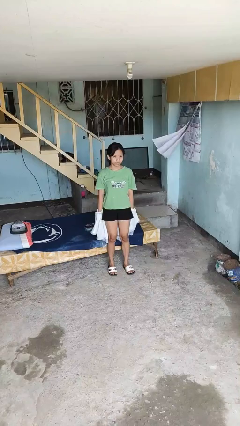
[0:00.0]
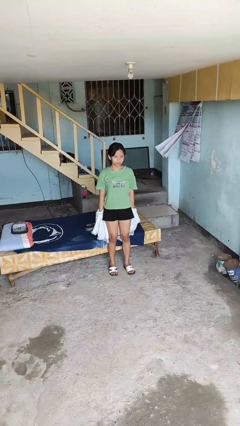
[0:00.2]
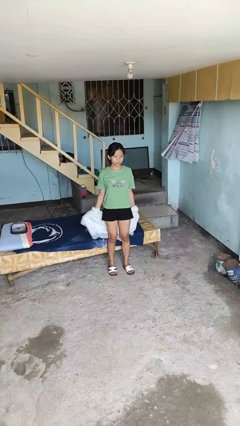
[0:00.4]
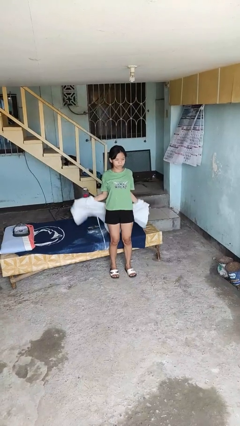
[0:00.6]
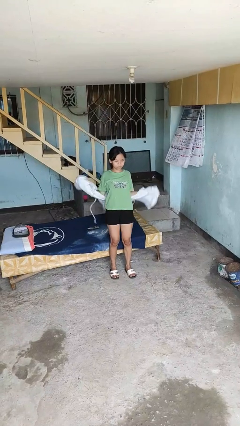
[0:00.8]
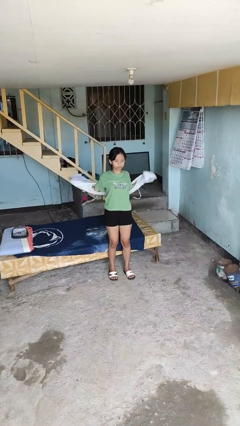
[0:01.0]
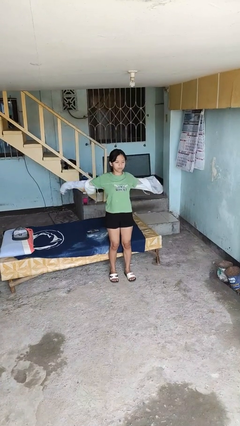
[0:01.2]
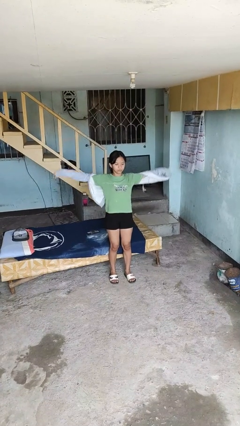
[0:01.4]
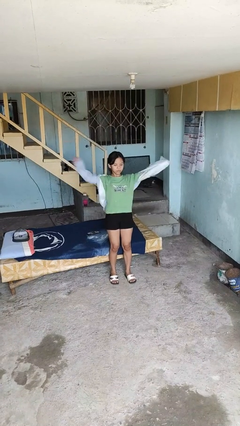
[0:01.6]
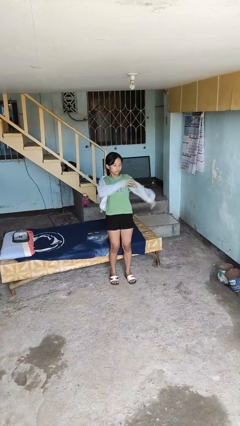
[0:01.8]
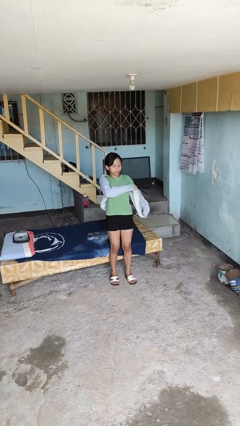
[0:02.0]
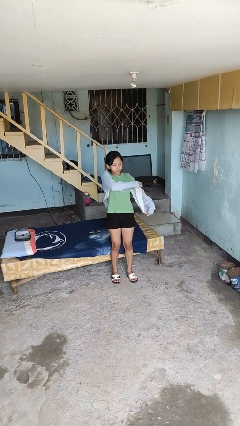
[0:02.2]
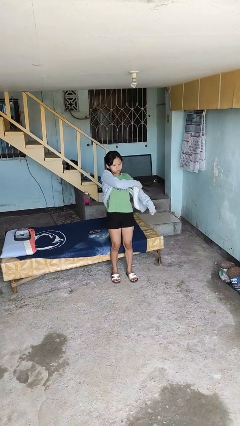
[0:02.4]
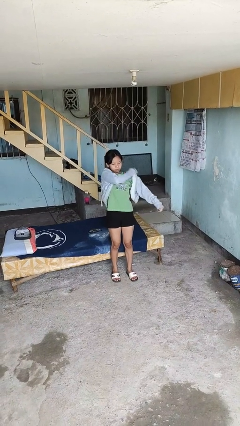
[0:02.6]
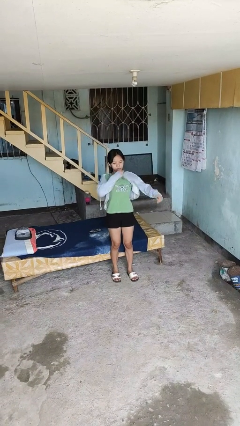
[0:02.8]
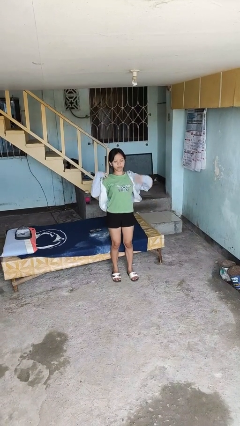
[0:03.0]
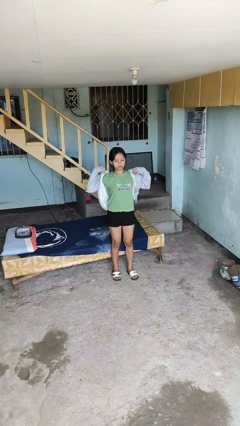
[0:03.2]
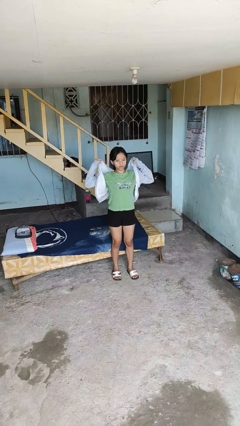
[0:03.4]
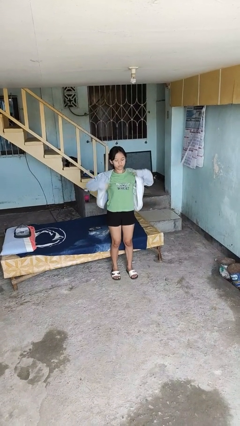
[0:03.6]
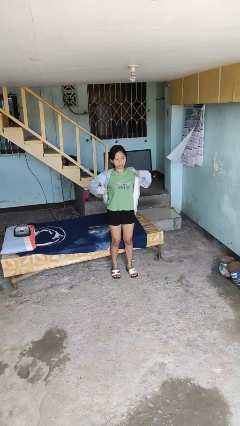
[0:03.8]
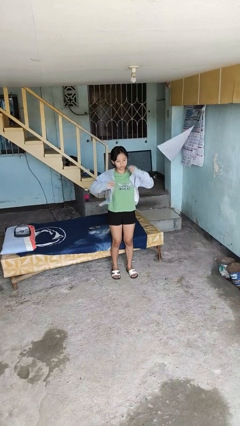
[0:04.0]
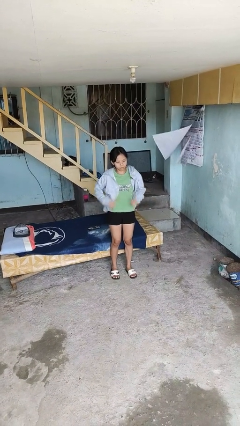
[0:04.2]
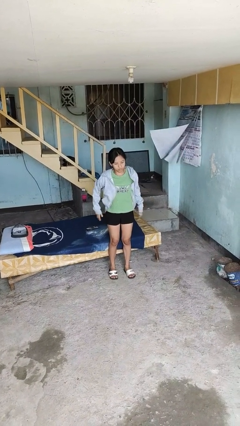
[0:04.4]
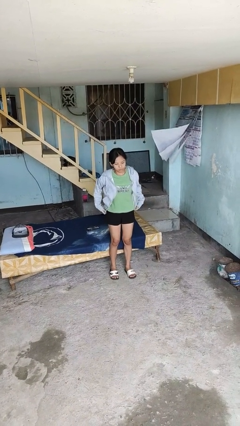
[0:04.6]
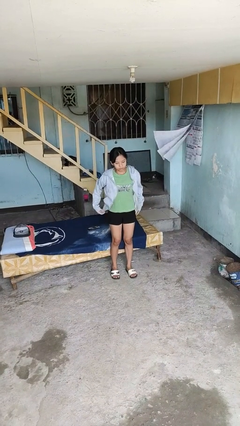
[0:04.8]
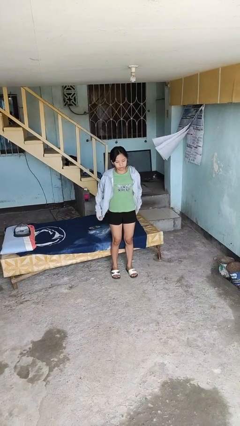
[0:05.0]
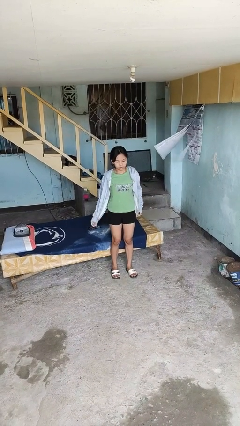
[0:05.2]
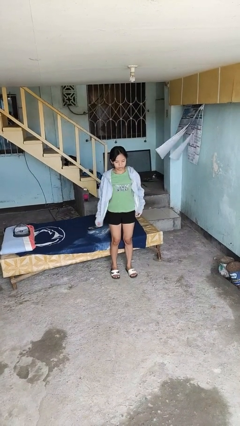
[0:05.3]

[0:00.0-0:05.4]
person puts on jacket

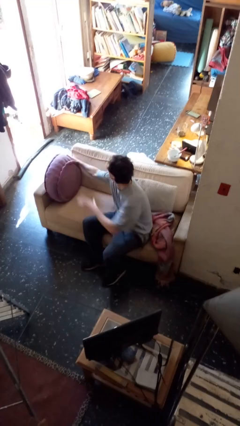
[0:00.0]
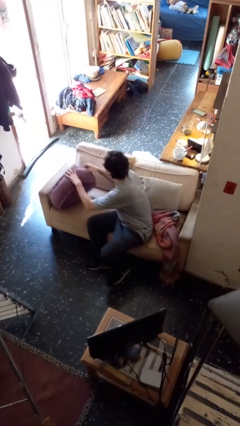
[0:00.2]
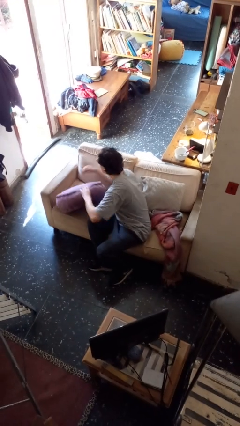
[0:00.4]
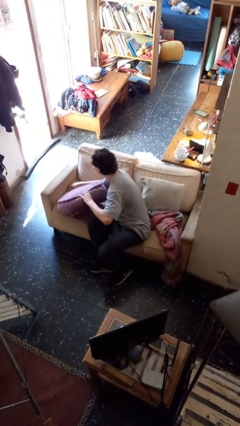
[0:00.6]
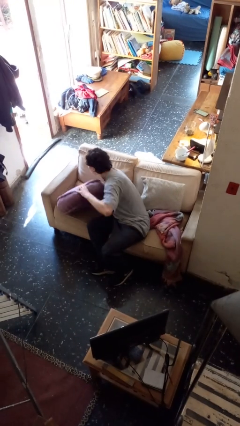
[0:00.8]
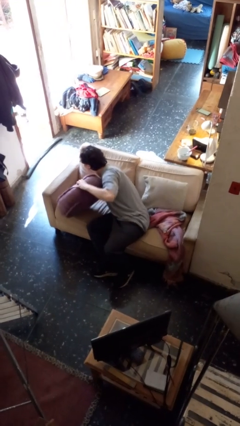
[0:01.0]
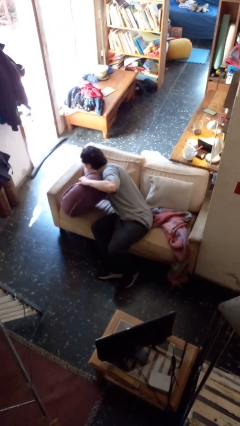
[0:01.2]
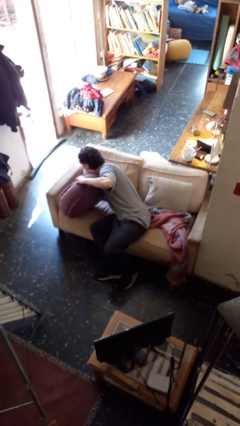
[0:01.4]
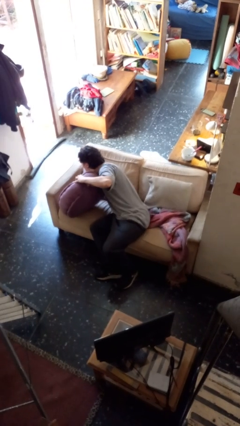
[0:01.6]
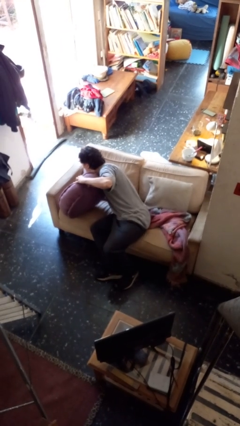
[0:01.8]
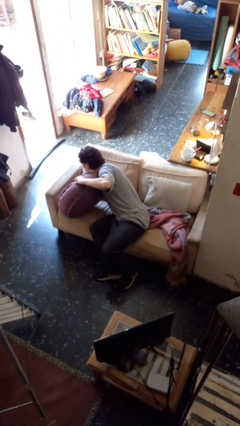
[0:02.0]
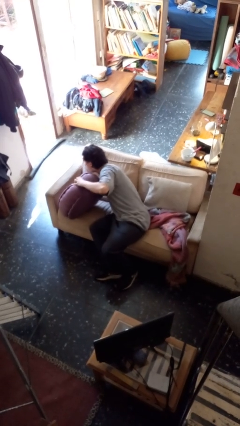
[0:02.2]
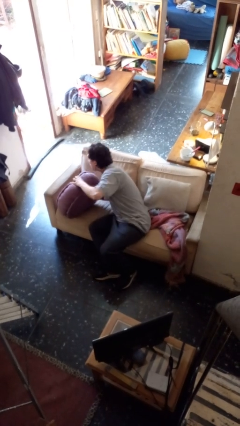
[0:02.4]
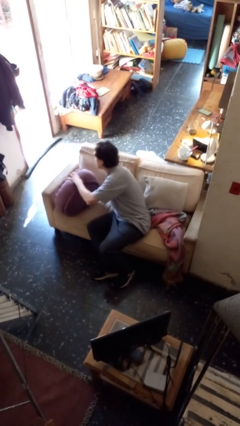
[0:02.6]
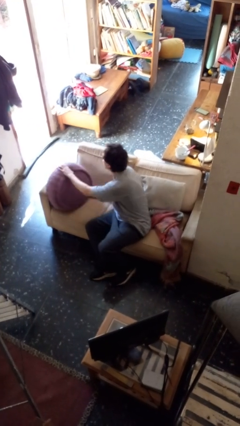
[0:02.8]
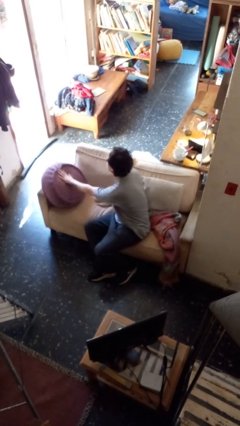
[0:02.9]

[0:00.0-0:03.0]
person searches in couch

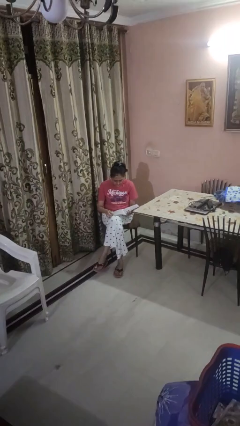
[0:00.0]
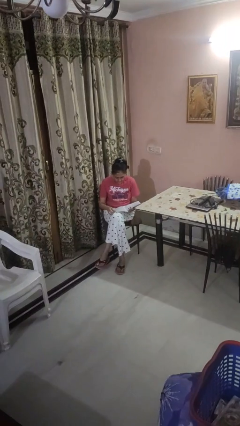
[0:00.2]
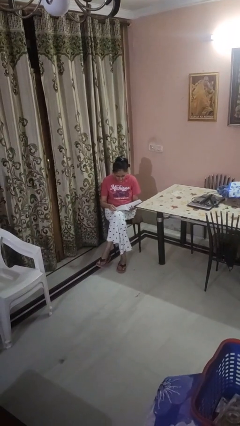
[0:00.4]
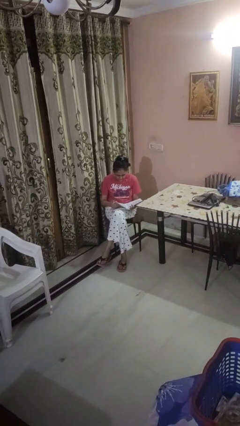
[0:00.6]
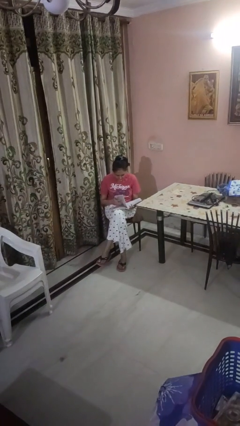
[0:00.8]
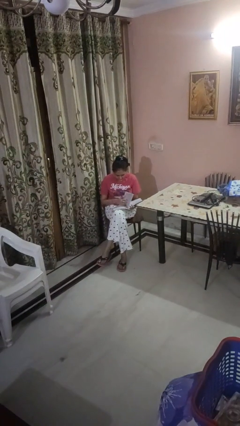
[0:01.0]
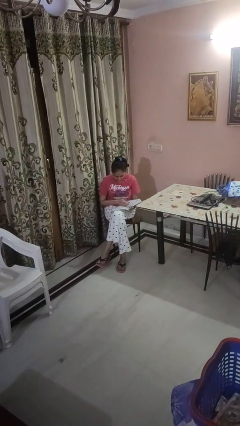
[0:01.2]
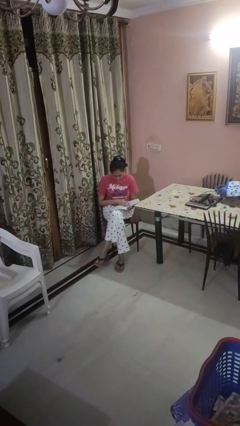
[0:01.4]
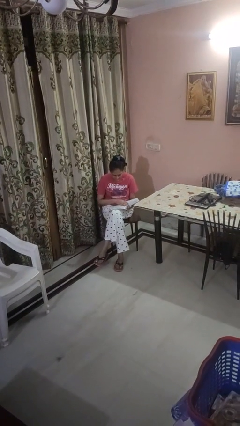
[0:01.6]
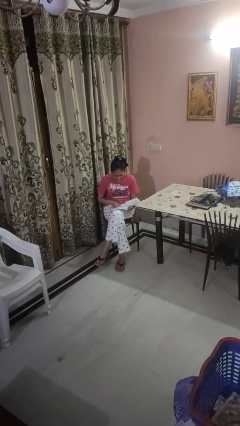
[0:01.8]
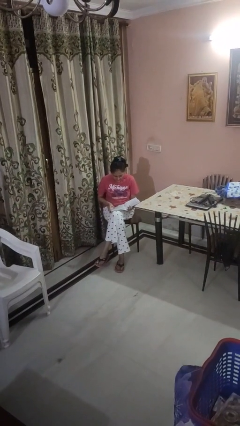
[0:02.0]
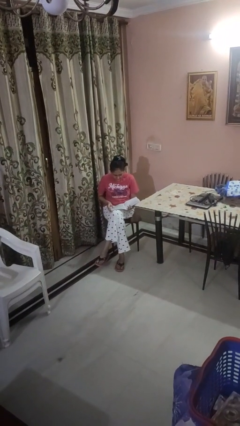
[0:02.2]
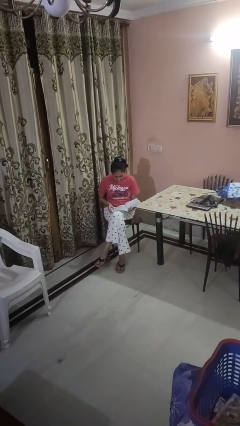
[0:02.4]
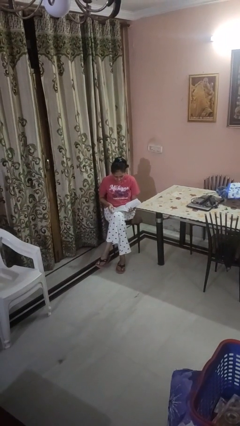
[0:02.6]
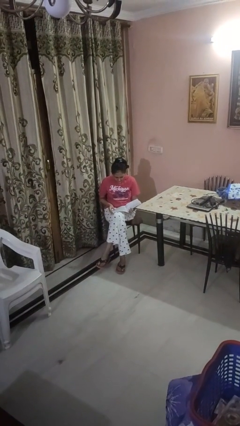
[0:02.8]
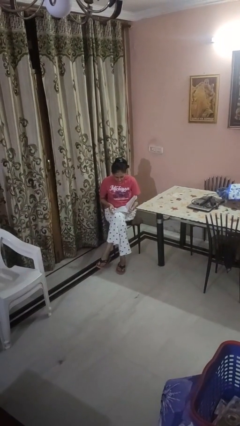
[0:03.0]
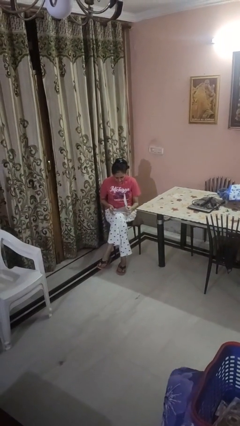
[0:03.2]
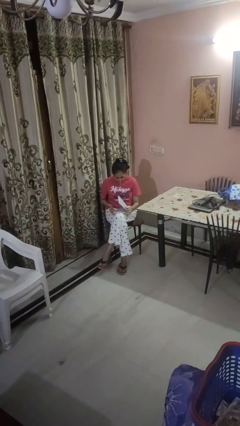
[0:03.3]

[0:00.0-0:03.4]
person reads magazine

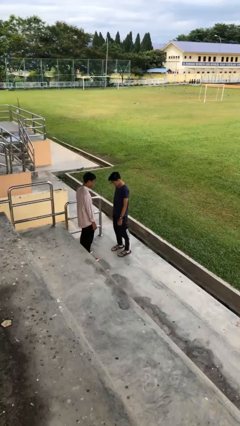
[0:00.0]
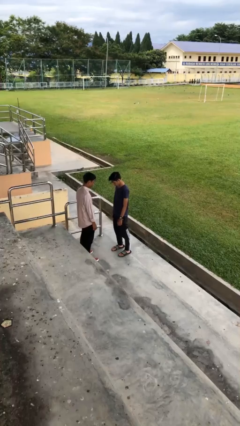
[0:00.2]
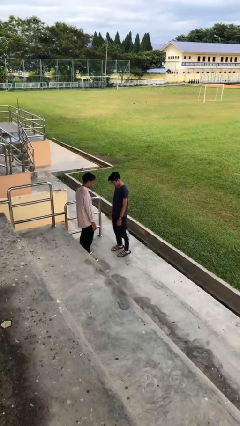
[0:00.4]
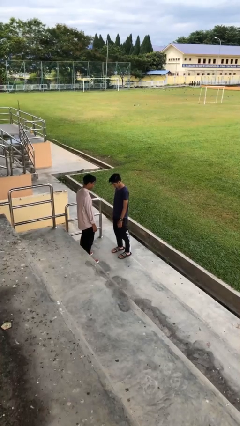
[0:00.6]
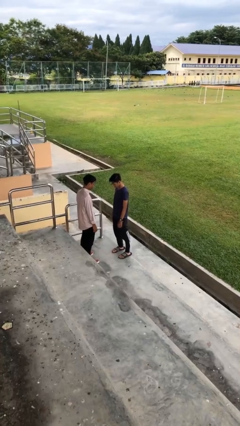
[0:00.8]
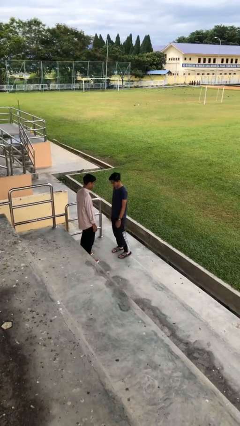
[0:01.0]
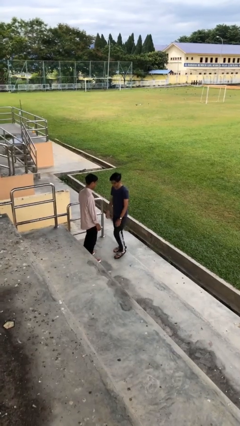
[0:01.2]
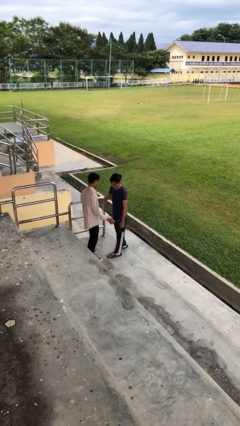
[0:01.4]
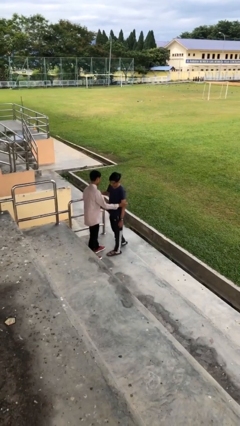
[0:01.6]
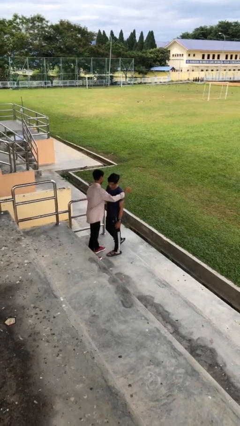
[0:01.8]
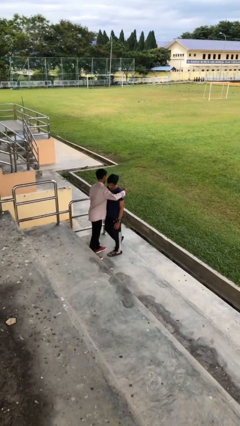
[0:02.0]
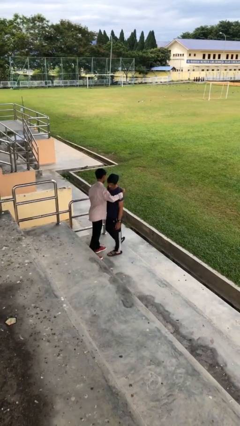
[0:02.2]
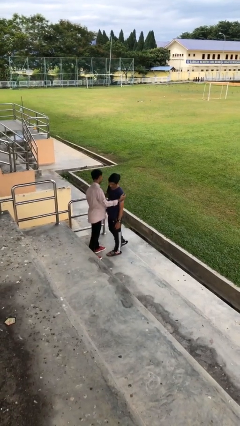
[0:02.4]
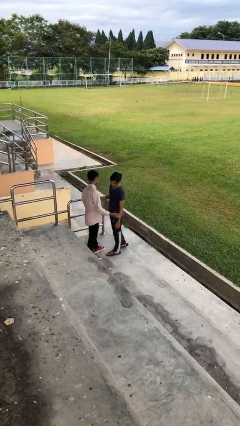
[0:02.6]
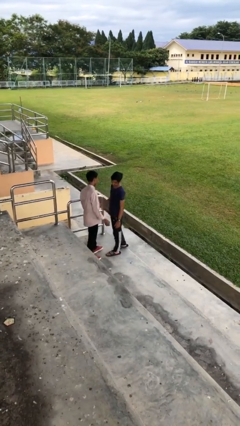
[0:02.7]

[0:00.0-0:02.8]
person embraces person

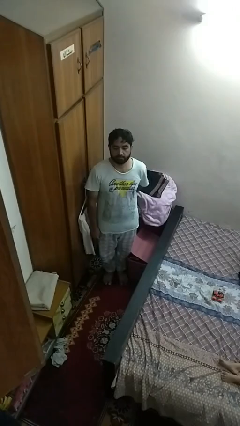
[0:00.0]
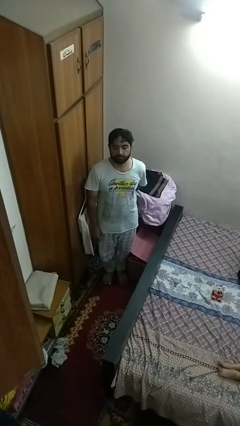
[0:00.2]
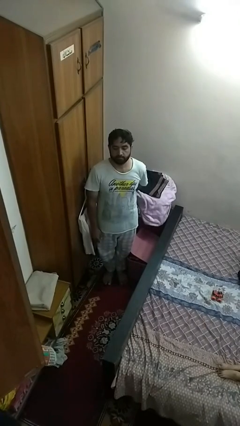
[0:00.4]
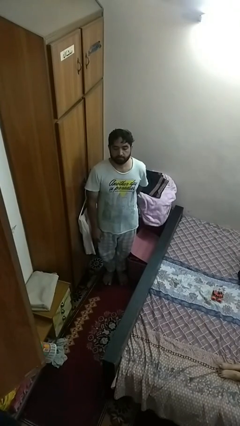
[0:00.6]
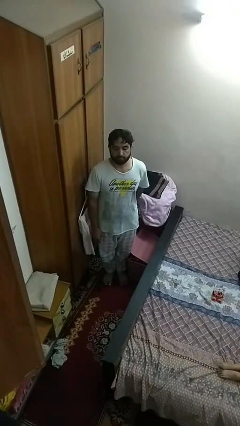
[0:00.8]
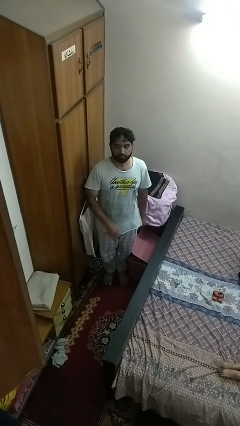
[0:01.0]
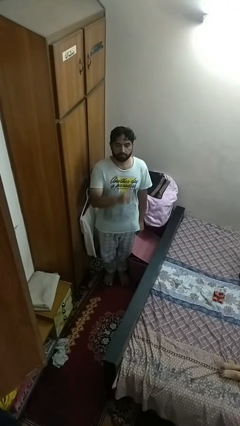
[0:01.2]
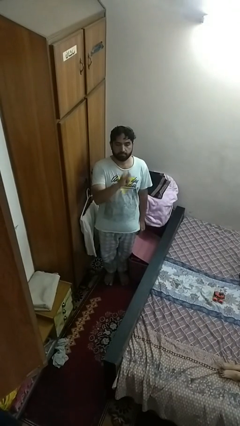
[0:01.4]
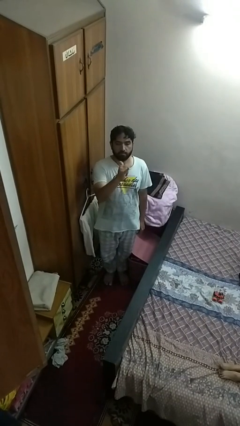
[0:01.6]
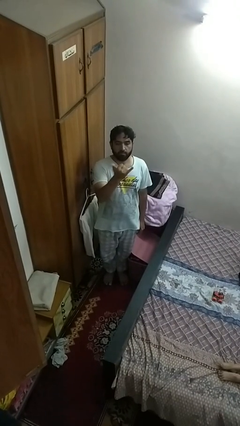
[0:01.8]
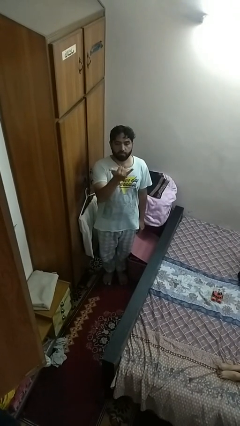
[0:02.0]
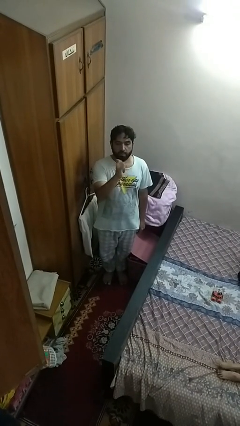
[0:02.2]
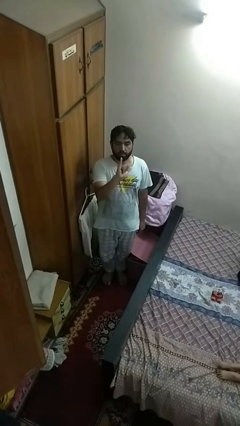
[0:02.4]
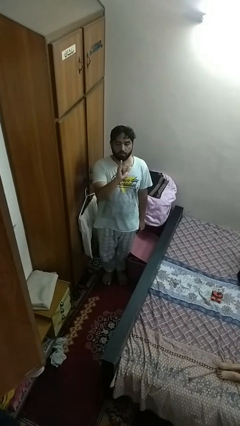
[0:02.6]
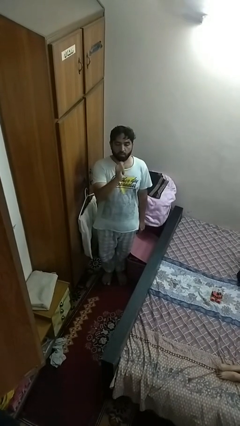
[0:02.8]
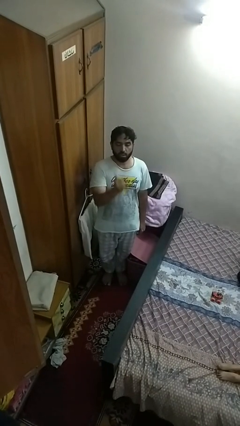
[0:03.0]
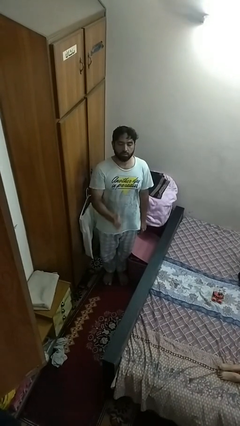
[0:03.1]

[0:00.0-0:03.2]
person gestures hang loose
